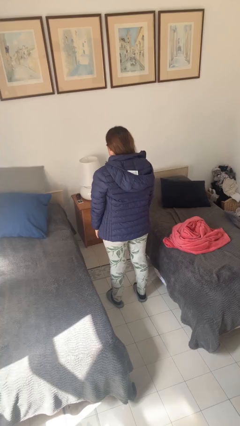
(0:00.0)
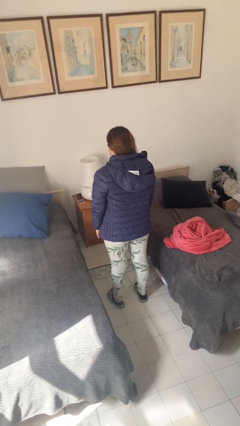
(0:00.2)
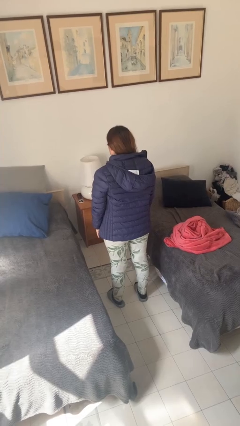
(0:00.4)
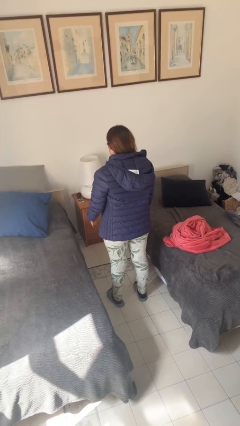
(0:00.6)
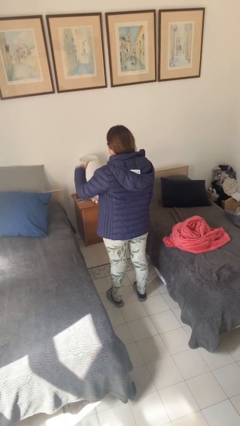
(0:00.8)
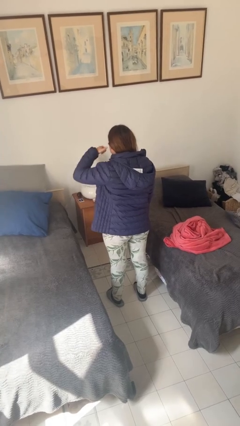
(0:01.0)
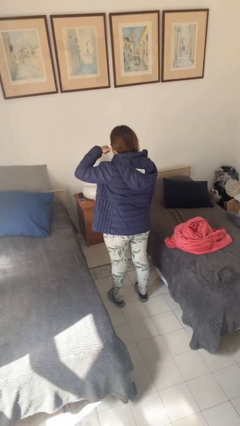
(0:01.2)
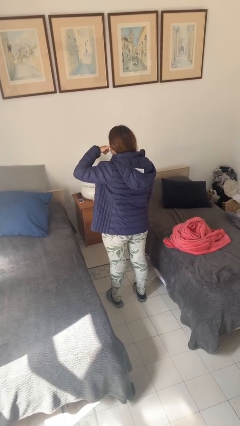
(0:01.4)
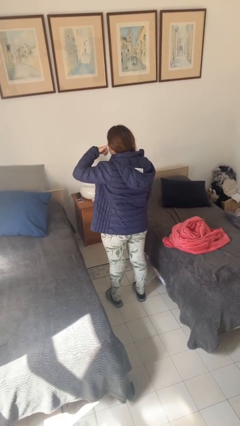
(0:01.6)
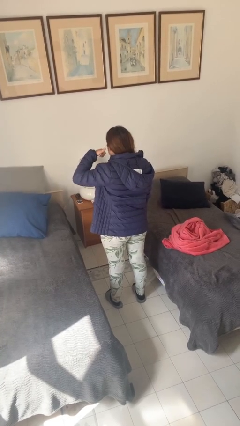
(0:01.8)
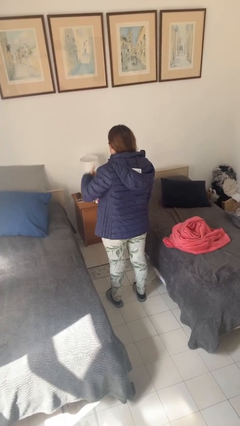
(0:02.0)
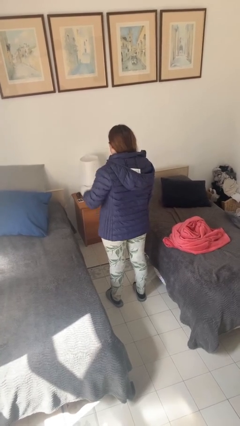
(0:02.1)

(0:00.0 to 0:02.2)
person gestures call me

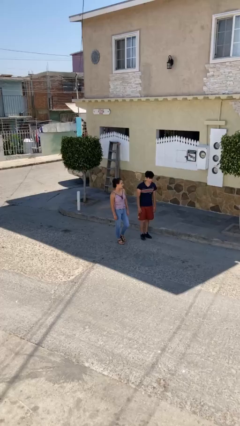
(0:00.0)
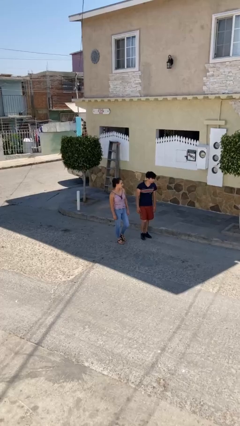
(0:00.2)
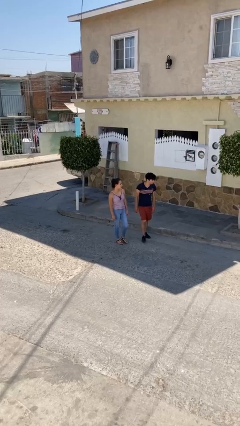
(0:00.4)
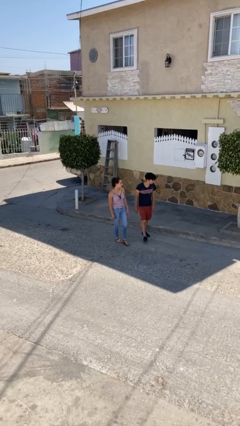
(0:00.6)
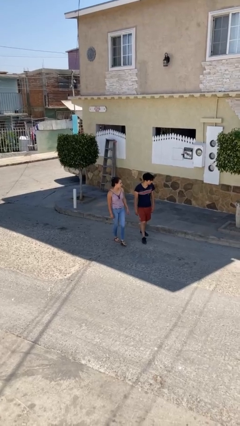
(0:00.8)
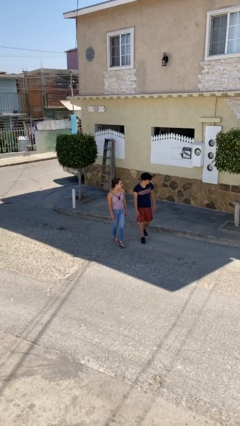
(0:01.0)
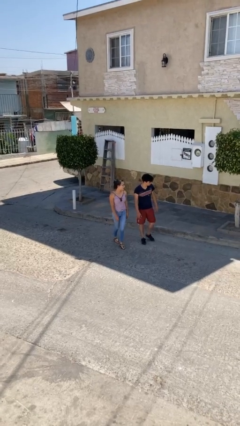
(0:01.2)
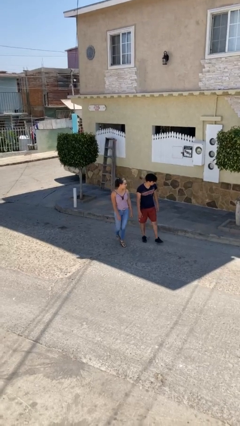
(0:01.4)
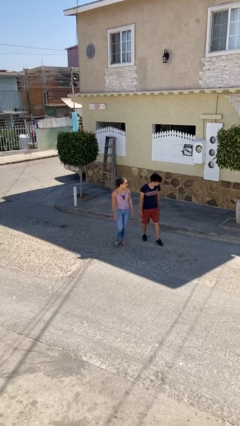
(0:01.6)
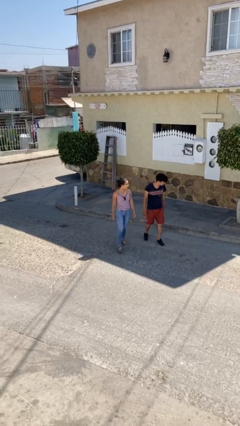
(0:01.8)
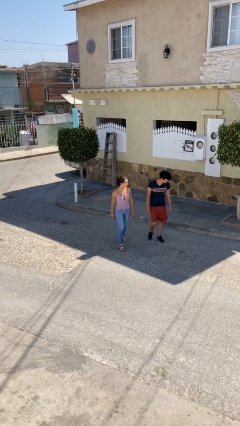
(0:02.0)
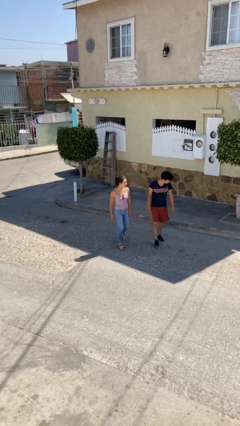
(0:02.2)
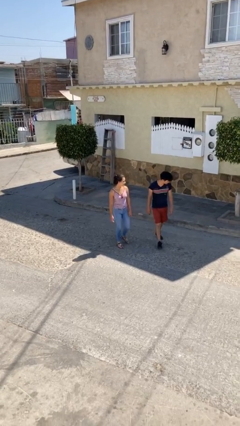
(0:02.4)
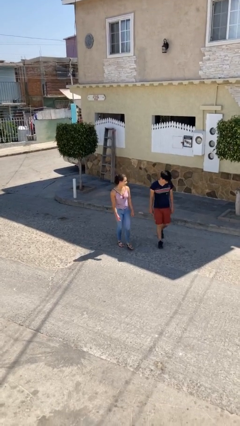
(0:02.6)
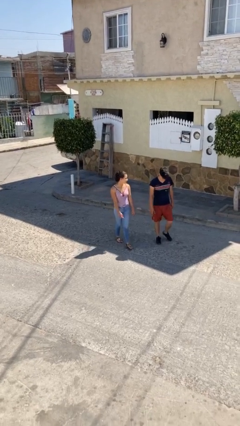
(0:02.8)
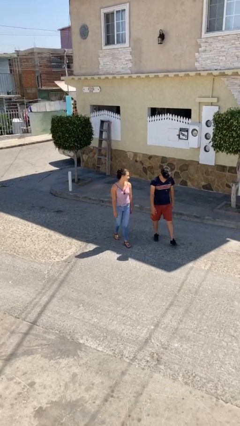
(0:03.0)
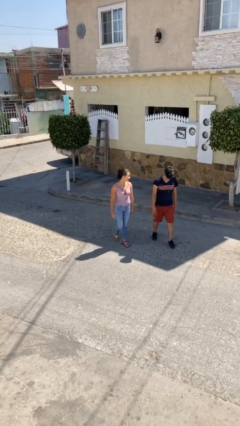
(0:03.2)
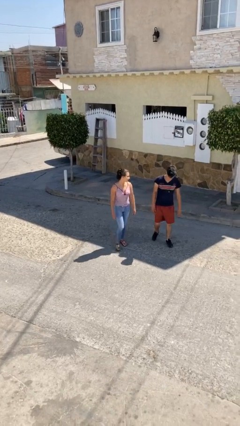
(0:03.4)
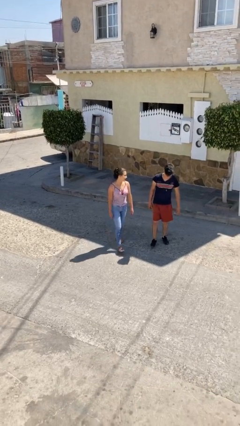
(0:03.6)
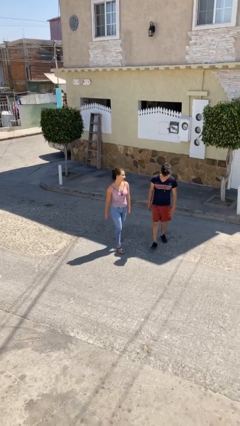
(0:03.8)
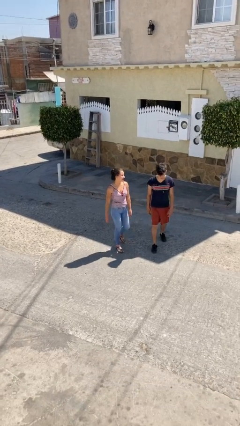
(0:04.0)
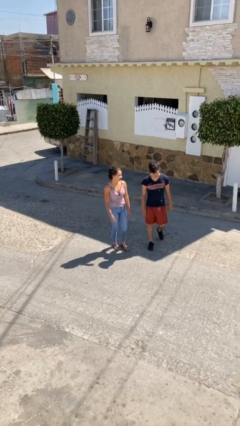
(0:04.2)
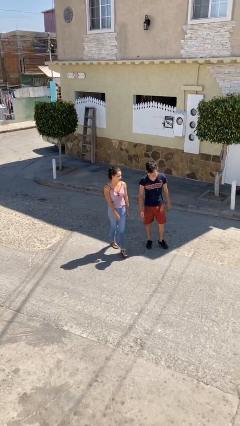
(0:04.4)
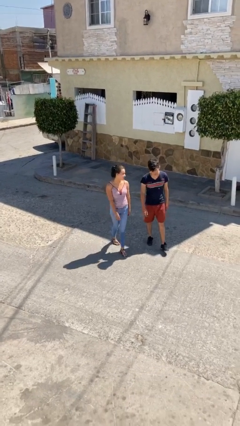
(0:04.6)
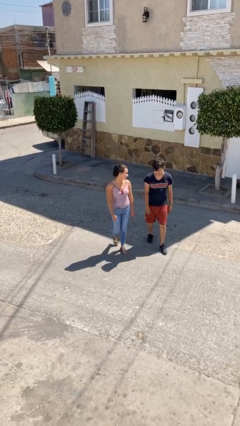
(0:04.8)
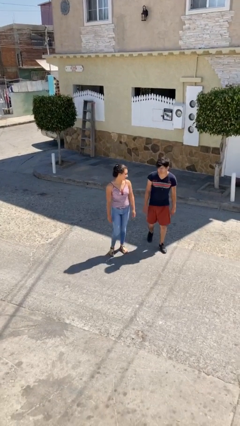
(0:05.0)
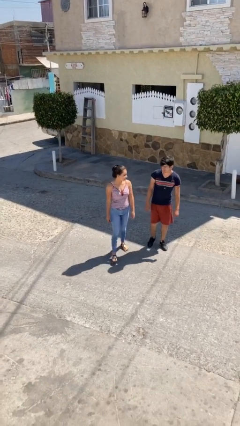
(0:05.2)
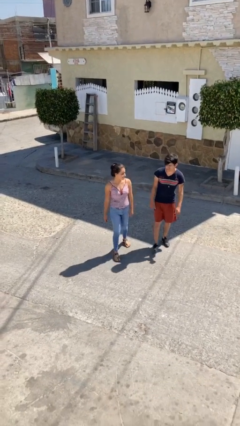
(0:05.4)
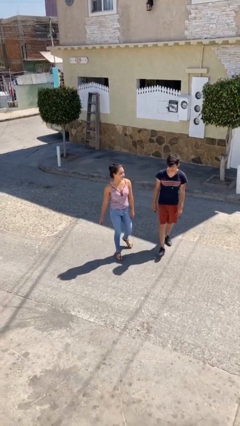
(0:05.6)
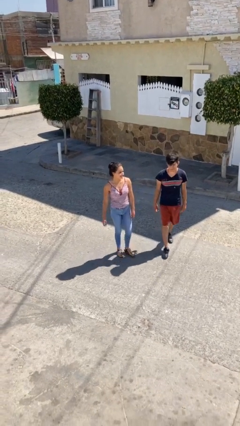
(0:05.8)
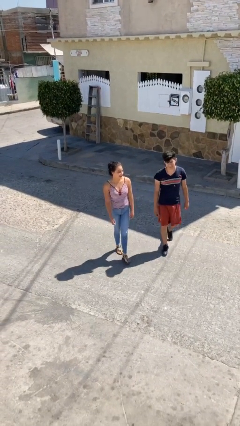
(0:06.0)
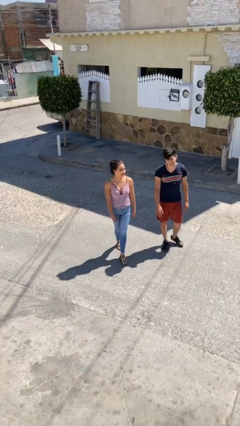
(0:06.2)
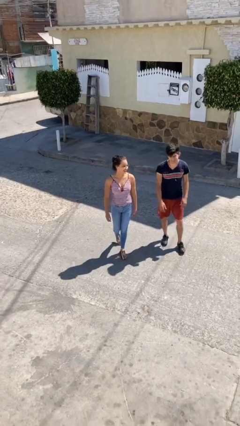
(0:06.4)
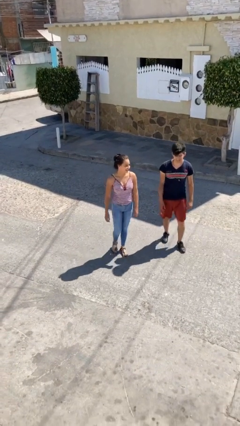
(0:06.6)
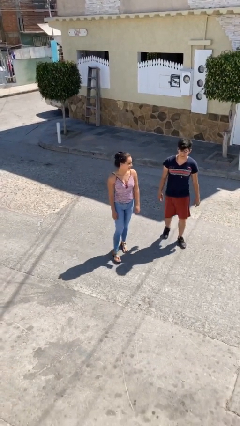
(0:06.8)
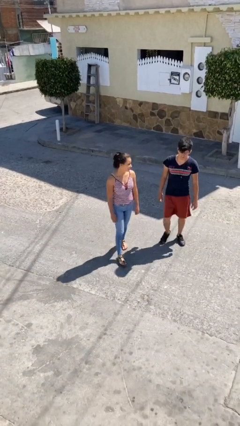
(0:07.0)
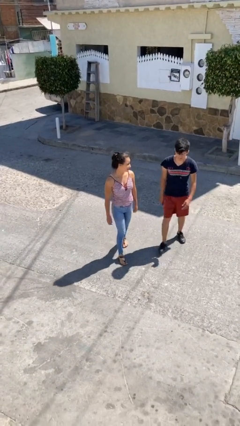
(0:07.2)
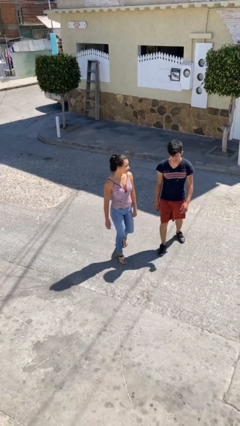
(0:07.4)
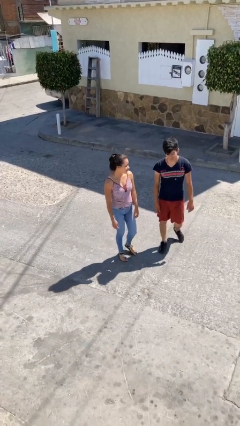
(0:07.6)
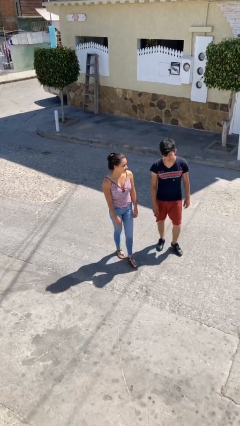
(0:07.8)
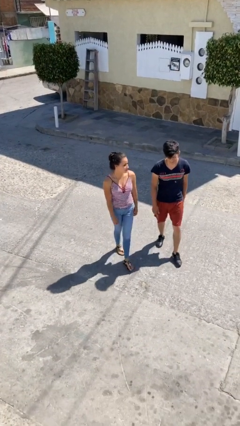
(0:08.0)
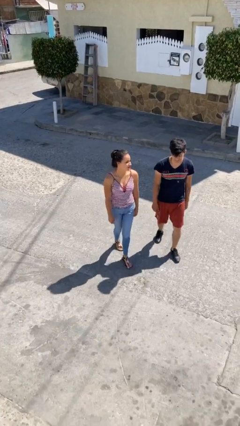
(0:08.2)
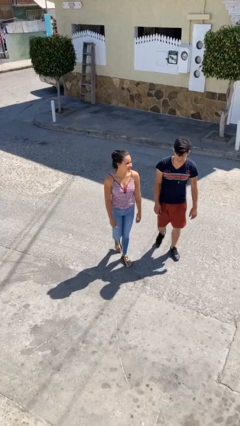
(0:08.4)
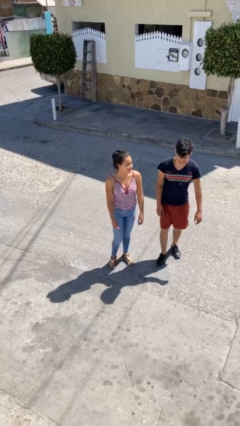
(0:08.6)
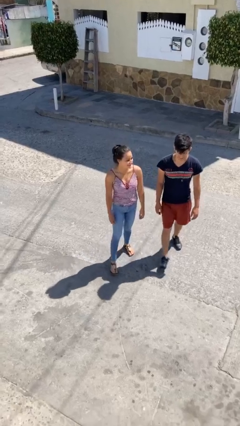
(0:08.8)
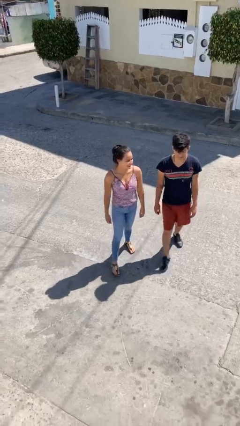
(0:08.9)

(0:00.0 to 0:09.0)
person talks to person

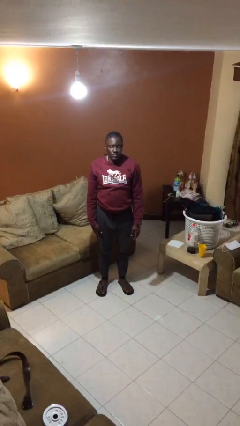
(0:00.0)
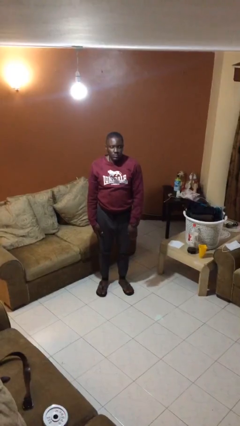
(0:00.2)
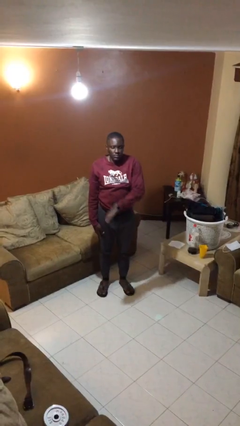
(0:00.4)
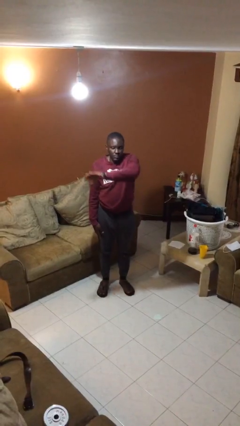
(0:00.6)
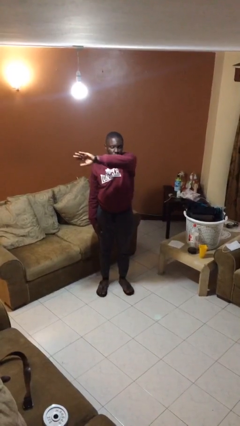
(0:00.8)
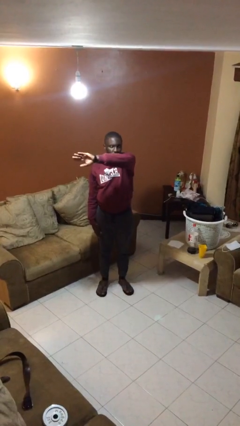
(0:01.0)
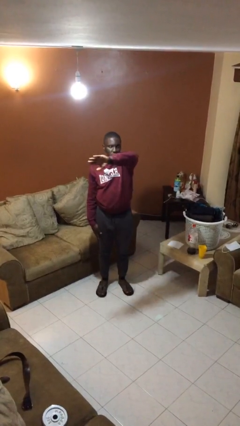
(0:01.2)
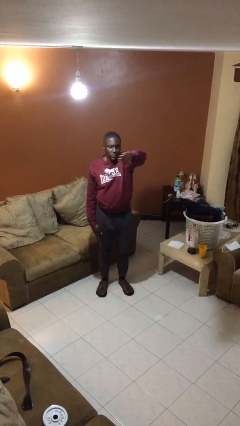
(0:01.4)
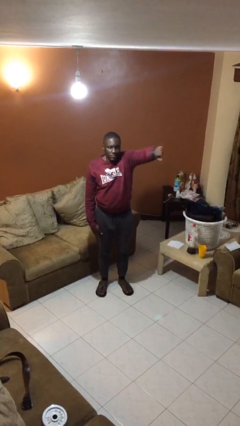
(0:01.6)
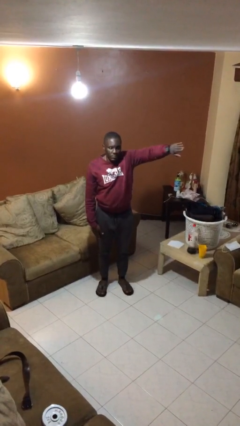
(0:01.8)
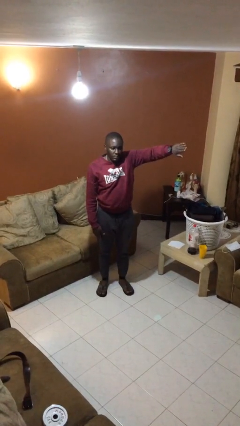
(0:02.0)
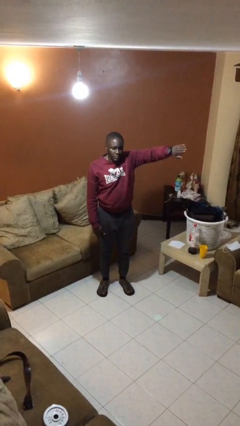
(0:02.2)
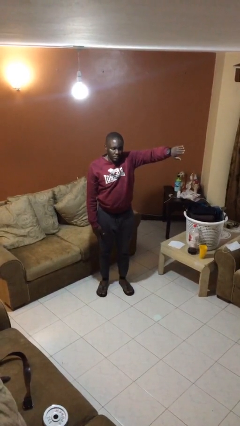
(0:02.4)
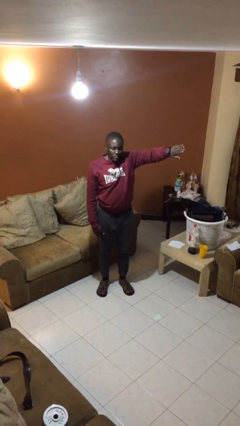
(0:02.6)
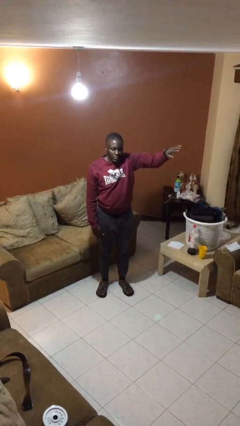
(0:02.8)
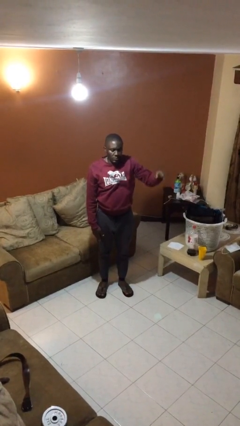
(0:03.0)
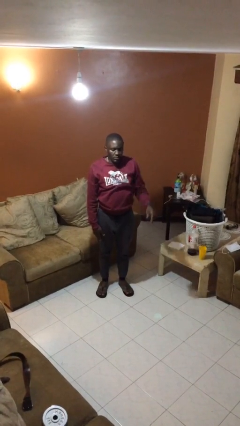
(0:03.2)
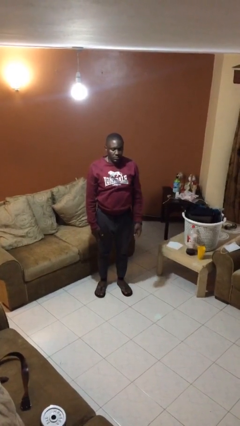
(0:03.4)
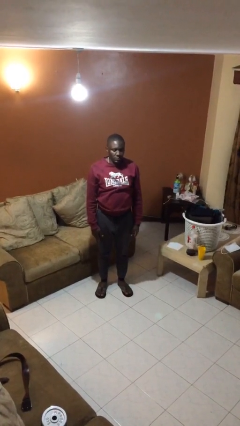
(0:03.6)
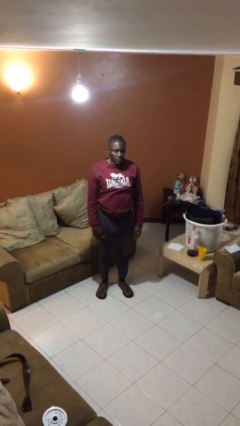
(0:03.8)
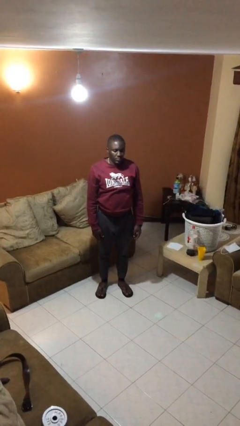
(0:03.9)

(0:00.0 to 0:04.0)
person gestures swipe left

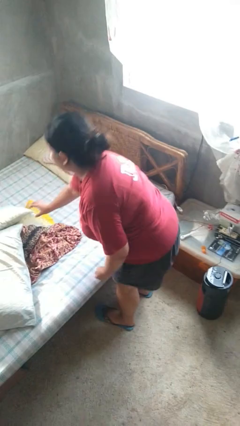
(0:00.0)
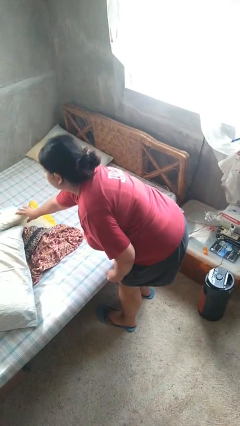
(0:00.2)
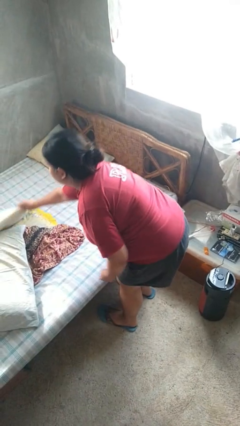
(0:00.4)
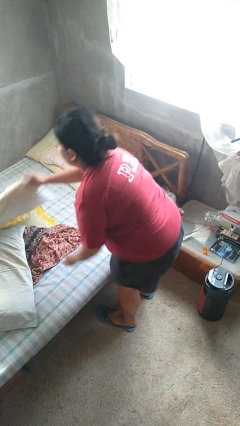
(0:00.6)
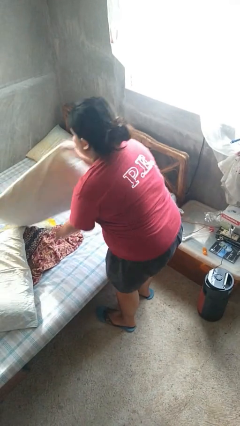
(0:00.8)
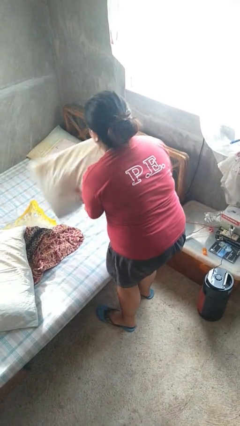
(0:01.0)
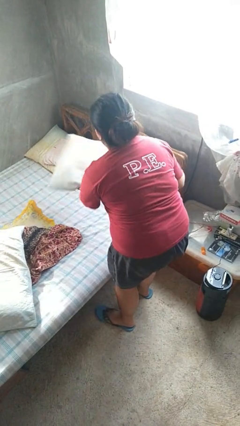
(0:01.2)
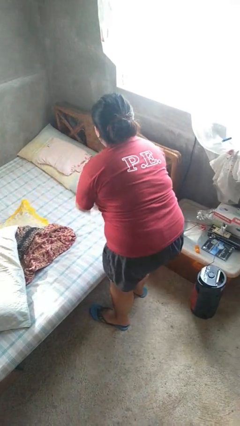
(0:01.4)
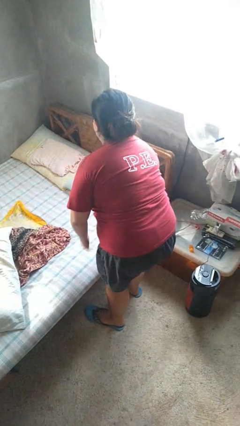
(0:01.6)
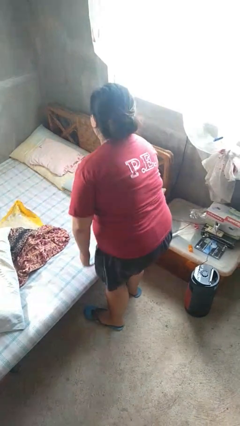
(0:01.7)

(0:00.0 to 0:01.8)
person makes bed

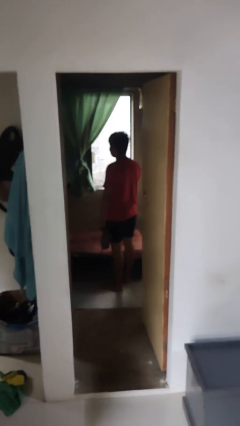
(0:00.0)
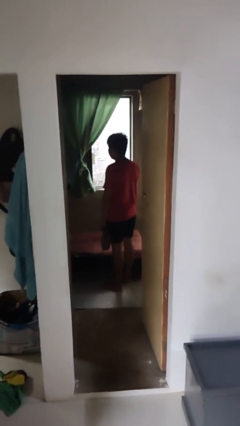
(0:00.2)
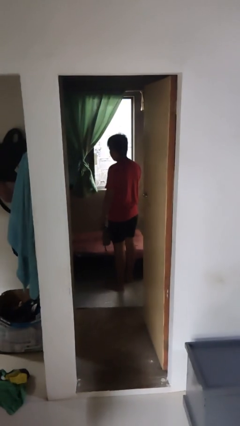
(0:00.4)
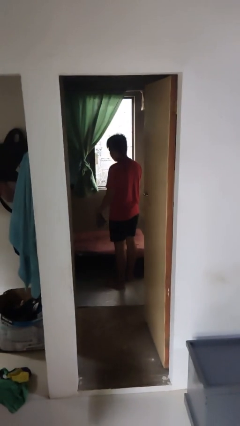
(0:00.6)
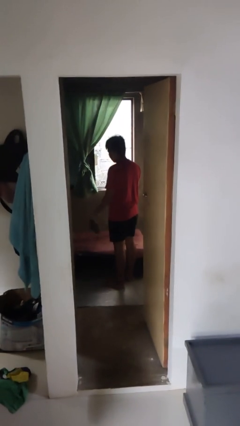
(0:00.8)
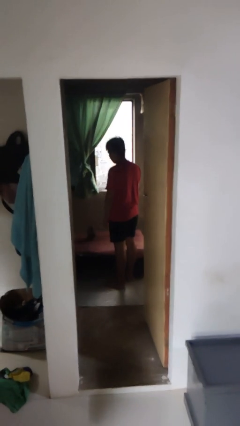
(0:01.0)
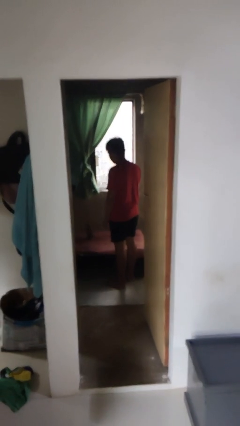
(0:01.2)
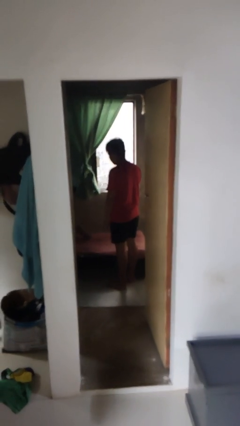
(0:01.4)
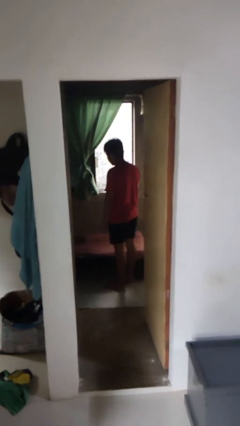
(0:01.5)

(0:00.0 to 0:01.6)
person throws object on bed
